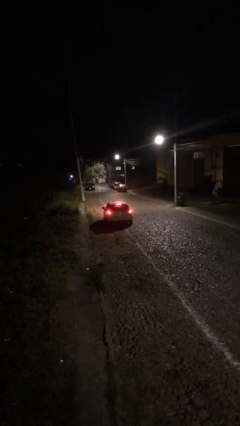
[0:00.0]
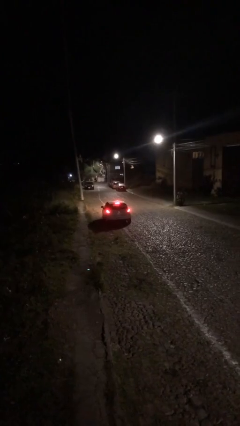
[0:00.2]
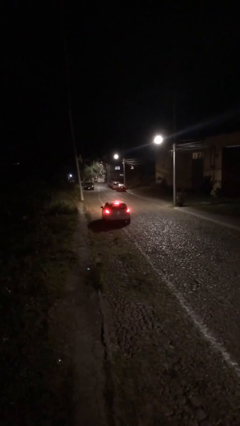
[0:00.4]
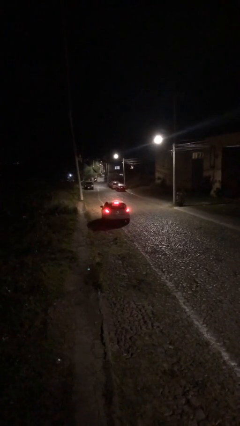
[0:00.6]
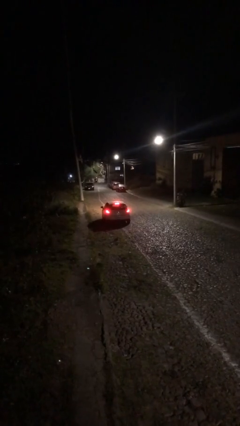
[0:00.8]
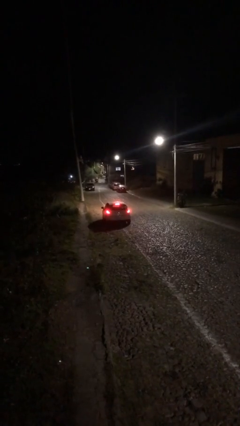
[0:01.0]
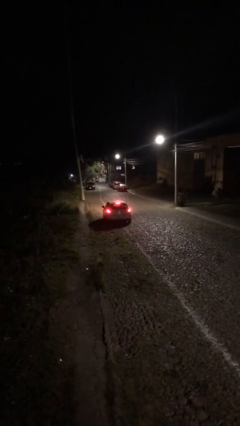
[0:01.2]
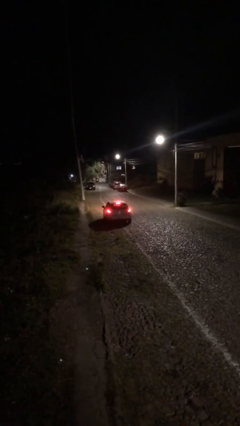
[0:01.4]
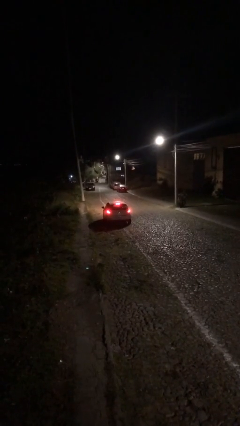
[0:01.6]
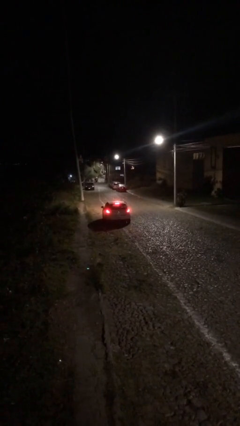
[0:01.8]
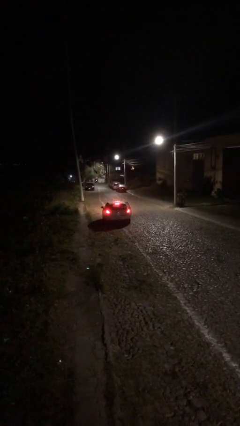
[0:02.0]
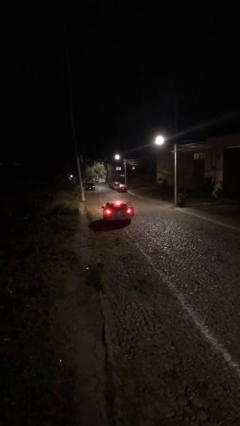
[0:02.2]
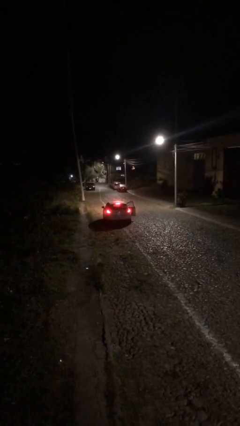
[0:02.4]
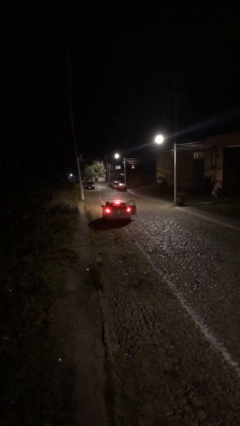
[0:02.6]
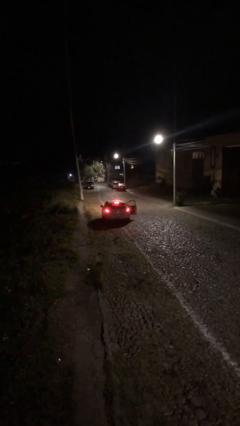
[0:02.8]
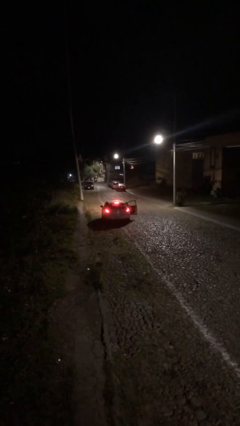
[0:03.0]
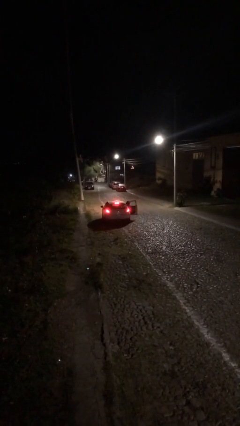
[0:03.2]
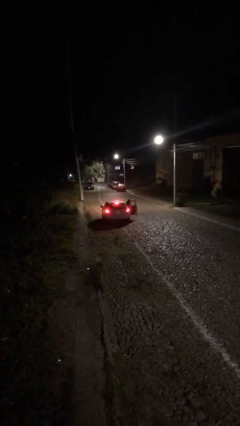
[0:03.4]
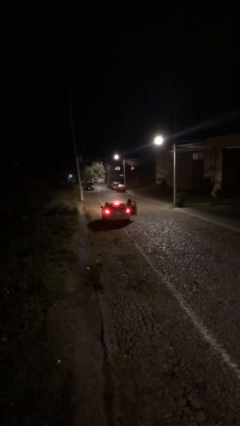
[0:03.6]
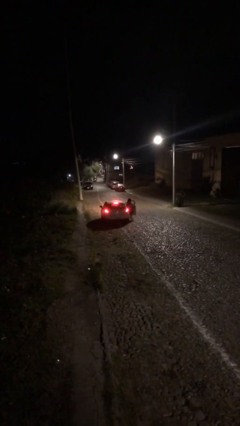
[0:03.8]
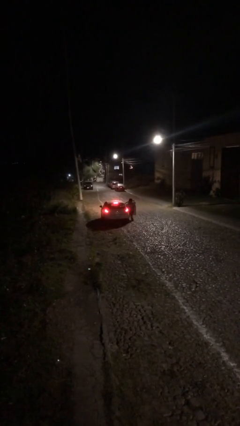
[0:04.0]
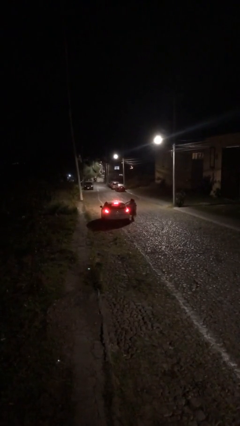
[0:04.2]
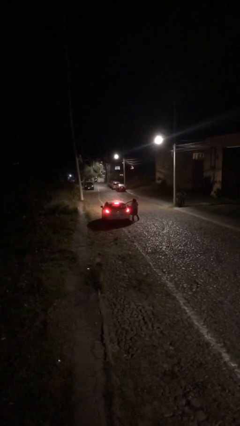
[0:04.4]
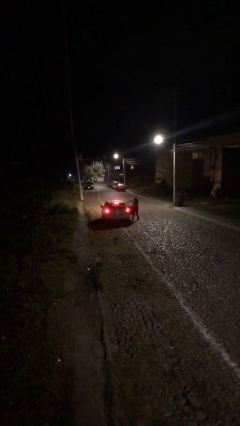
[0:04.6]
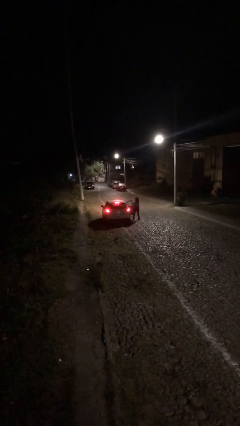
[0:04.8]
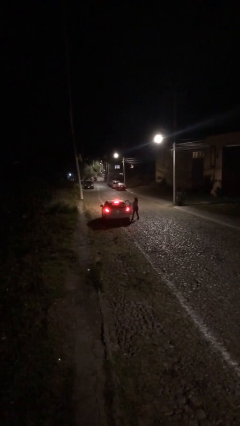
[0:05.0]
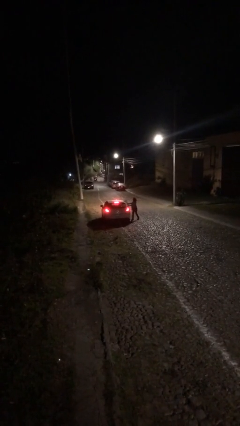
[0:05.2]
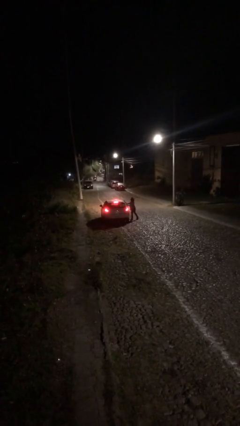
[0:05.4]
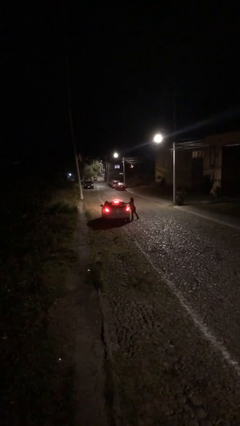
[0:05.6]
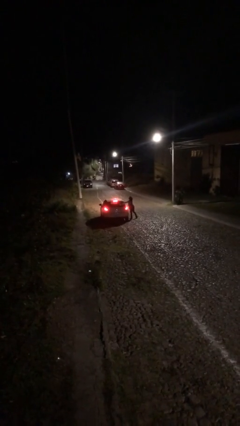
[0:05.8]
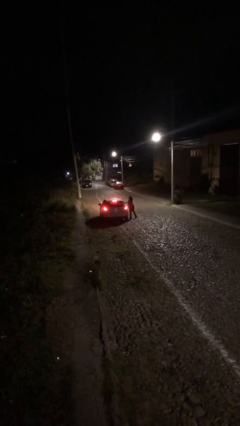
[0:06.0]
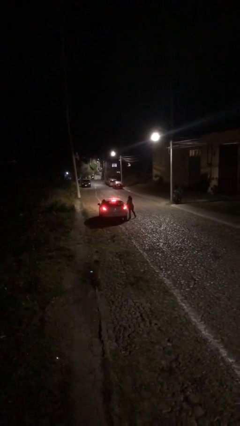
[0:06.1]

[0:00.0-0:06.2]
car drops off person

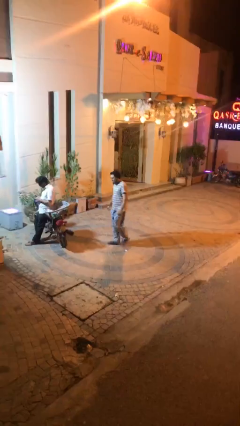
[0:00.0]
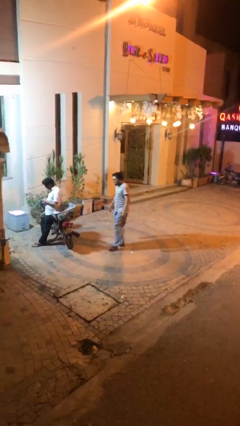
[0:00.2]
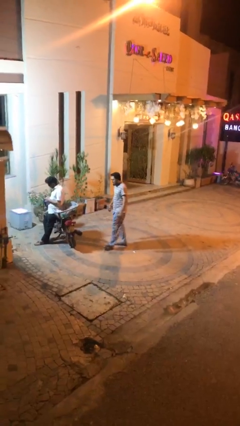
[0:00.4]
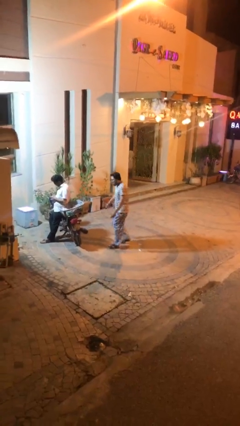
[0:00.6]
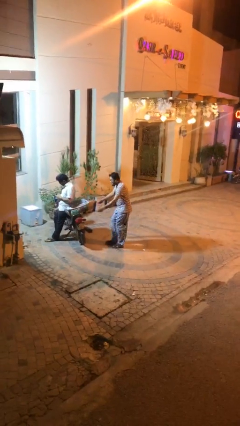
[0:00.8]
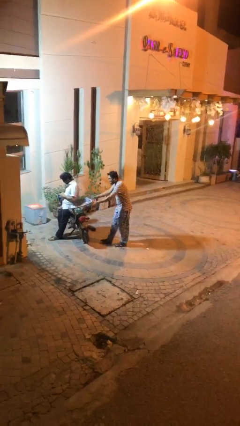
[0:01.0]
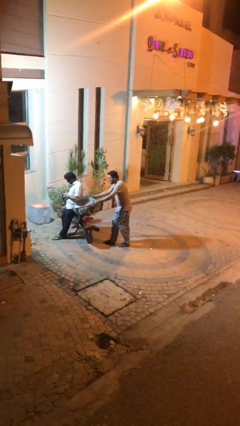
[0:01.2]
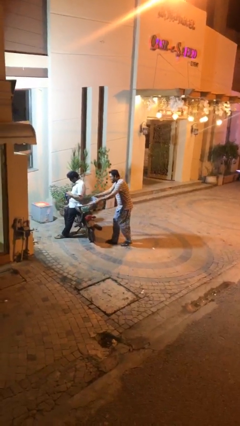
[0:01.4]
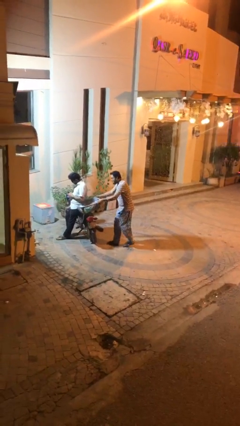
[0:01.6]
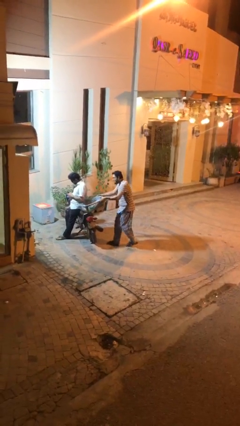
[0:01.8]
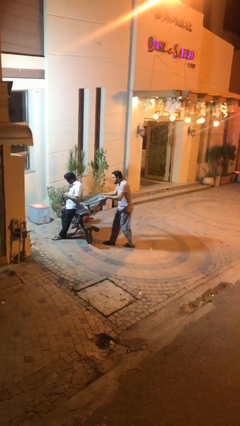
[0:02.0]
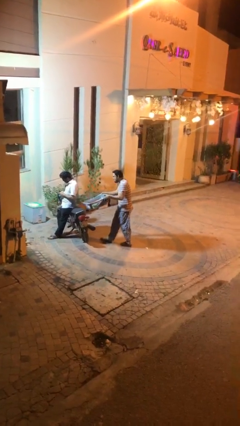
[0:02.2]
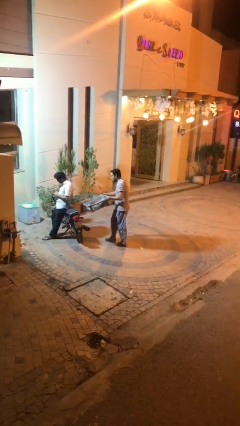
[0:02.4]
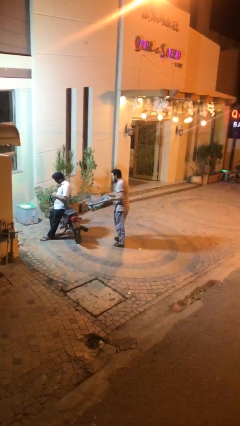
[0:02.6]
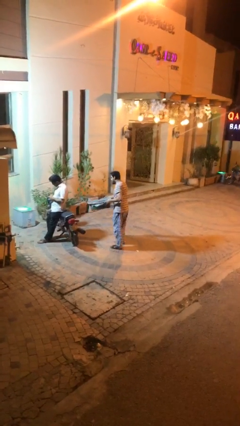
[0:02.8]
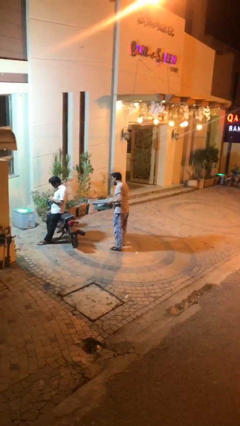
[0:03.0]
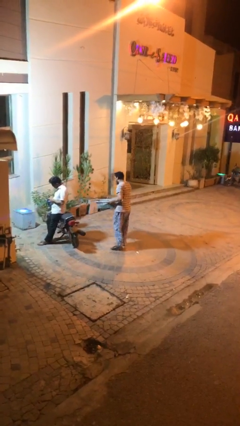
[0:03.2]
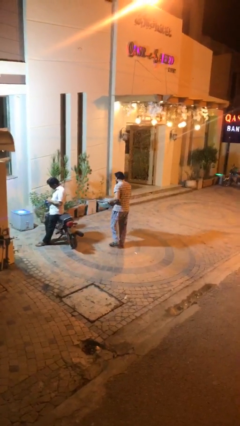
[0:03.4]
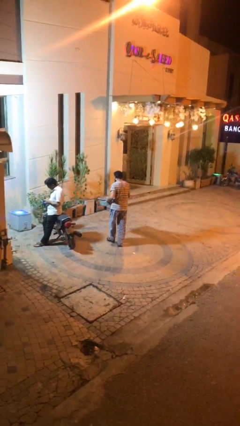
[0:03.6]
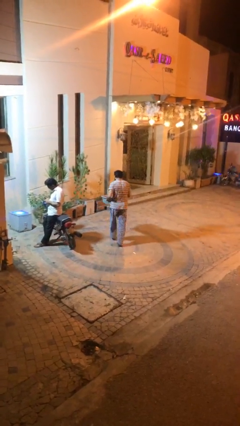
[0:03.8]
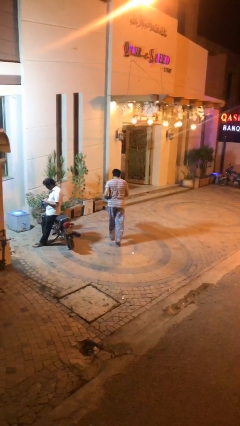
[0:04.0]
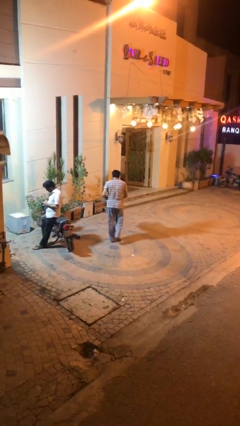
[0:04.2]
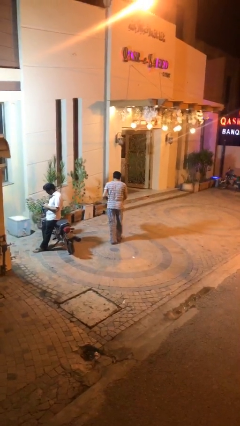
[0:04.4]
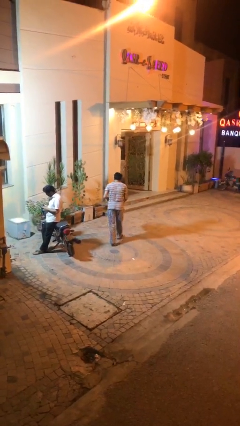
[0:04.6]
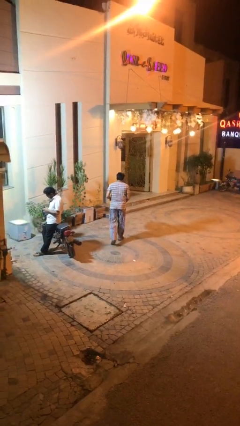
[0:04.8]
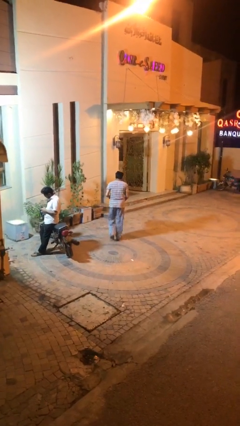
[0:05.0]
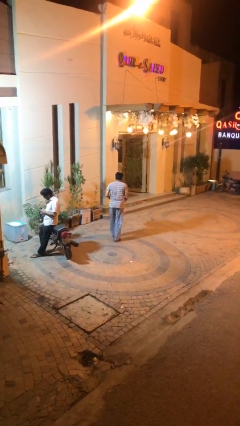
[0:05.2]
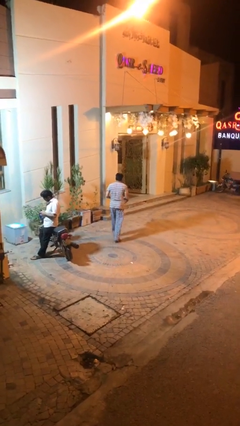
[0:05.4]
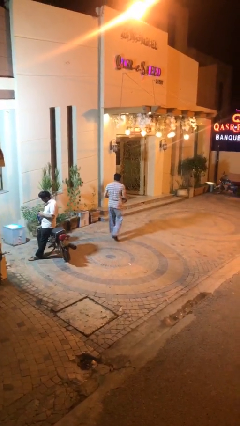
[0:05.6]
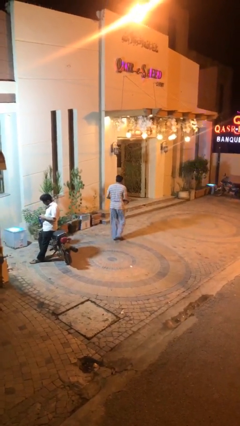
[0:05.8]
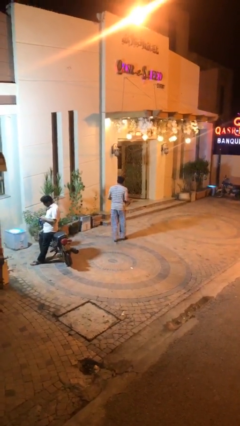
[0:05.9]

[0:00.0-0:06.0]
person steals object from person

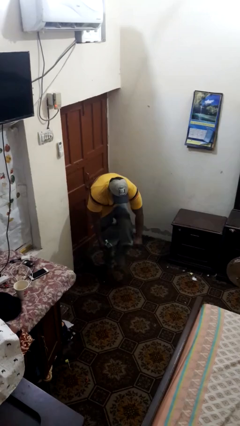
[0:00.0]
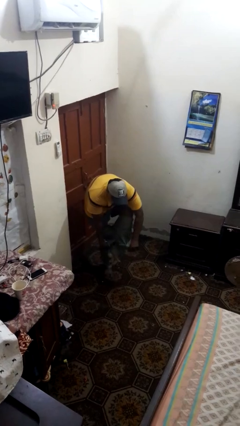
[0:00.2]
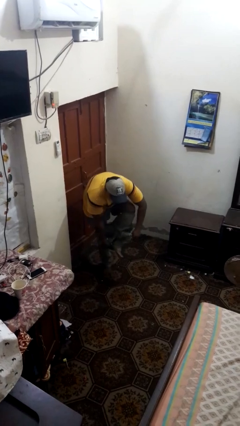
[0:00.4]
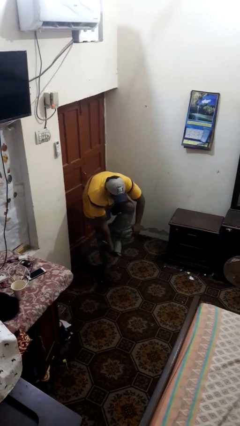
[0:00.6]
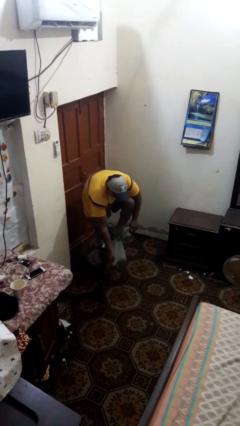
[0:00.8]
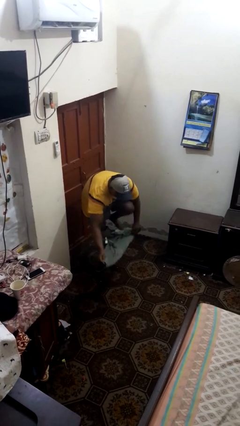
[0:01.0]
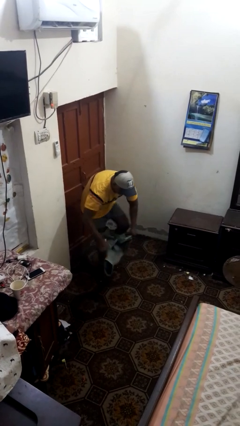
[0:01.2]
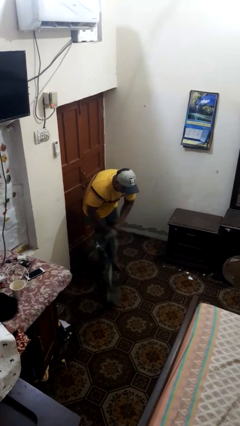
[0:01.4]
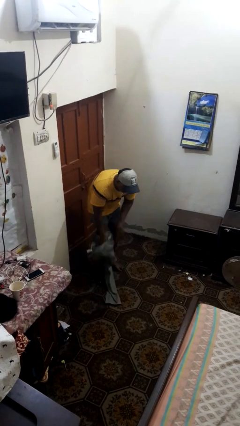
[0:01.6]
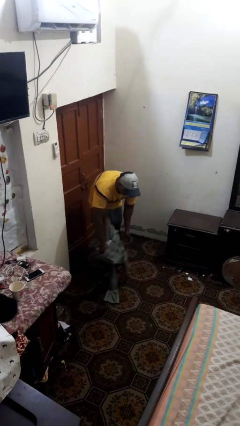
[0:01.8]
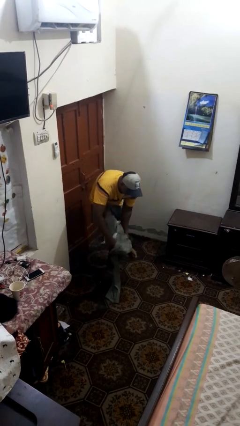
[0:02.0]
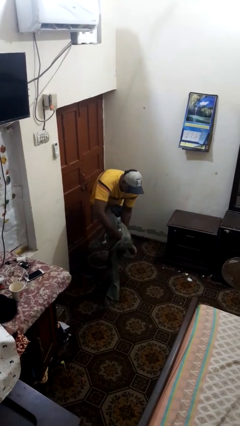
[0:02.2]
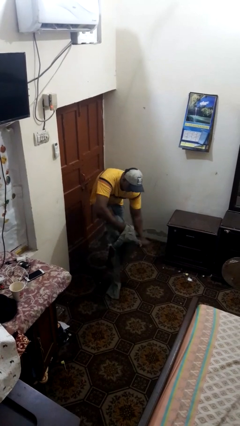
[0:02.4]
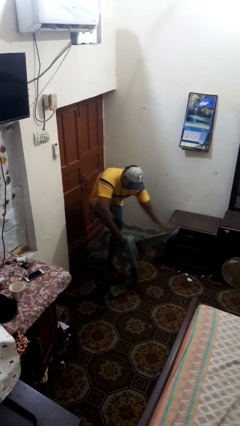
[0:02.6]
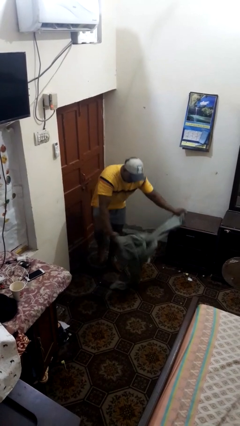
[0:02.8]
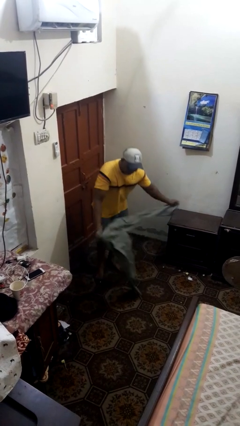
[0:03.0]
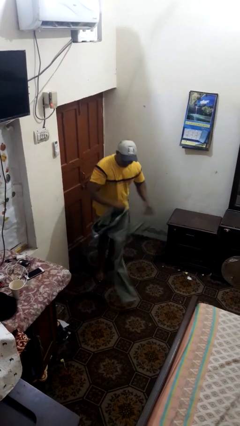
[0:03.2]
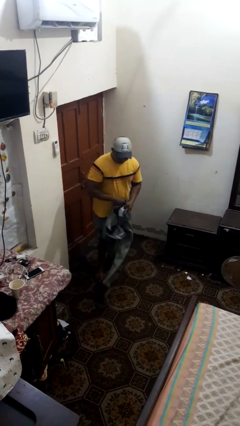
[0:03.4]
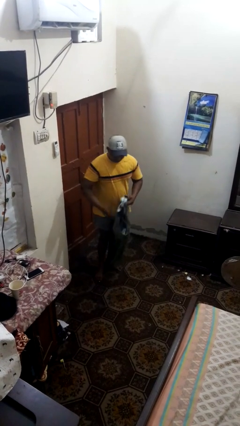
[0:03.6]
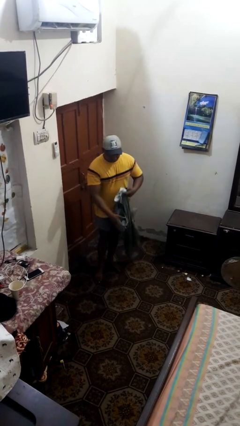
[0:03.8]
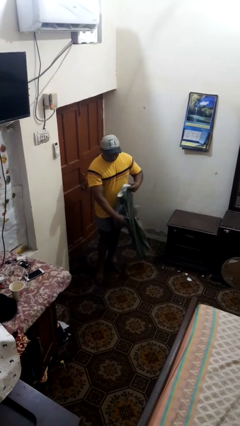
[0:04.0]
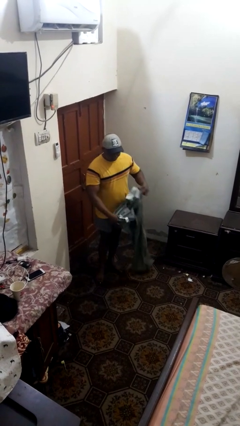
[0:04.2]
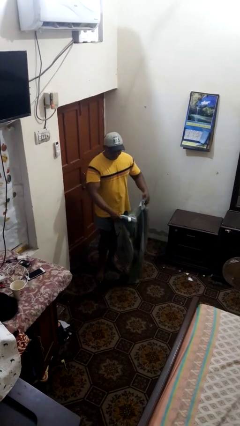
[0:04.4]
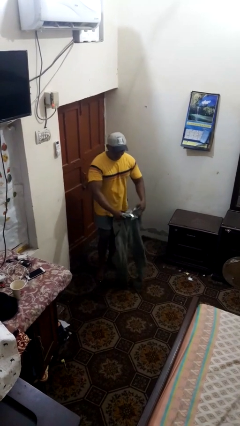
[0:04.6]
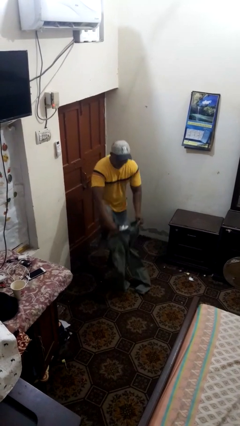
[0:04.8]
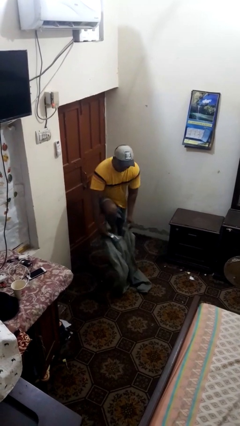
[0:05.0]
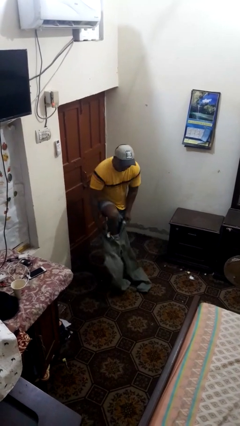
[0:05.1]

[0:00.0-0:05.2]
person takes off pants
